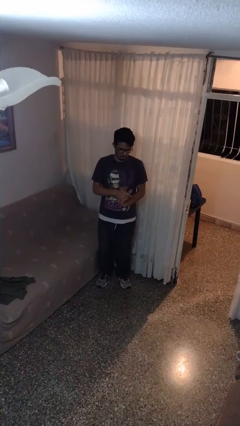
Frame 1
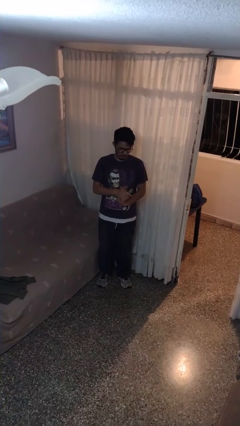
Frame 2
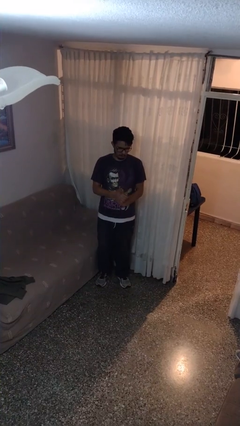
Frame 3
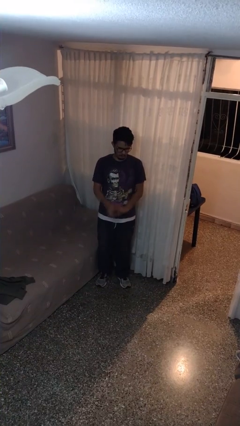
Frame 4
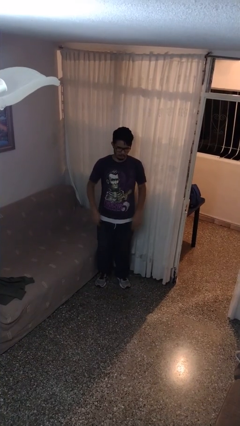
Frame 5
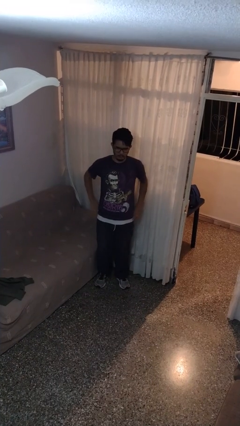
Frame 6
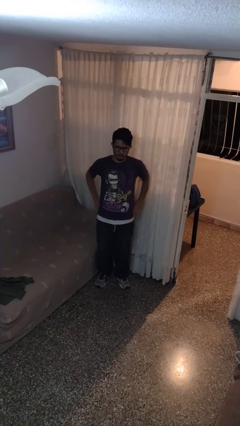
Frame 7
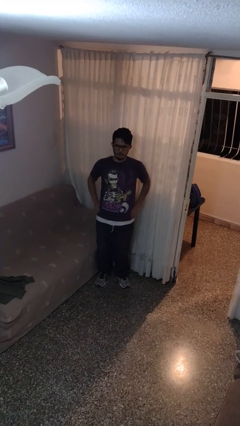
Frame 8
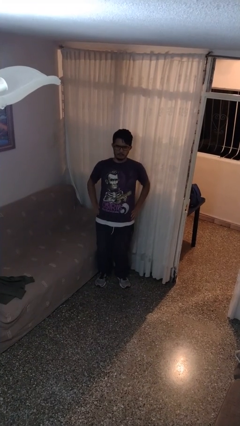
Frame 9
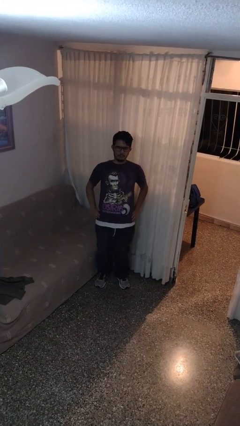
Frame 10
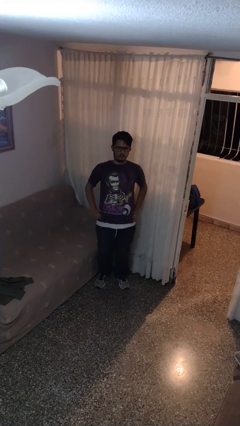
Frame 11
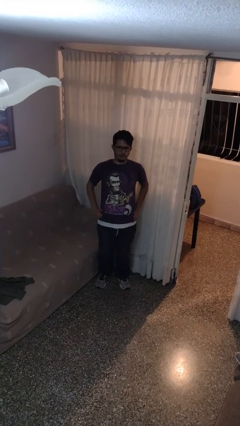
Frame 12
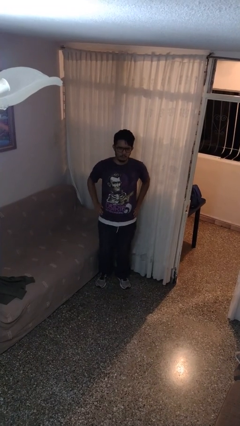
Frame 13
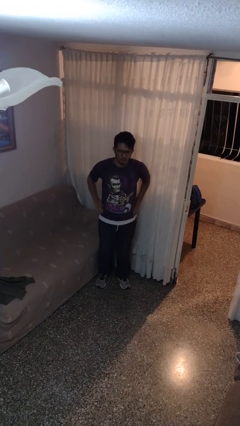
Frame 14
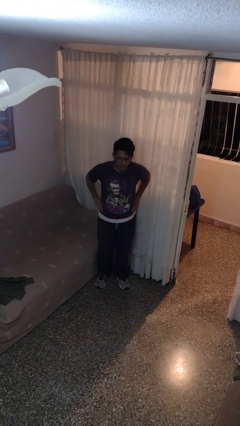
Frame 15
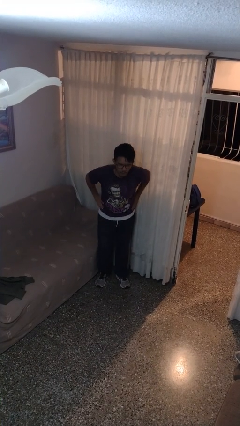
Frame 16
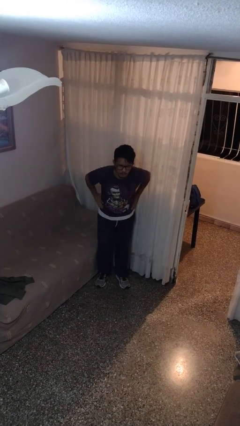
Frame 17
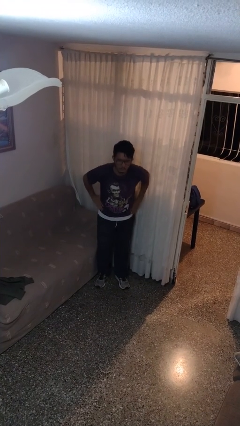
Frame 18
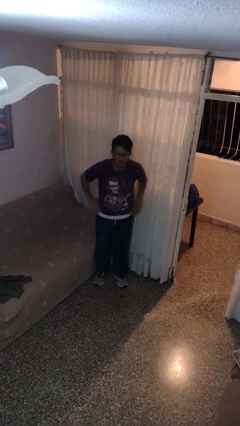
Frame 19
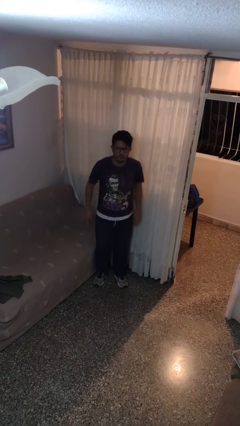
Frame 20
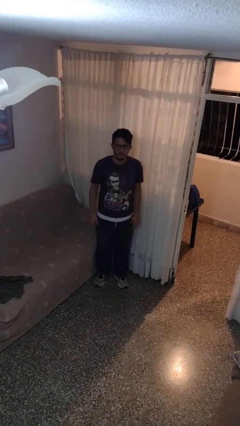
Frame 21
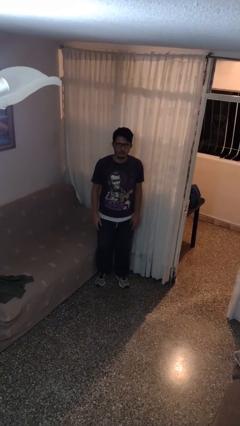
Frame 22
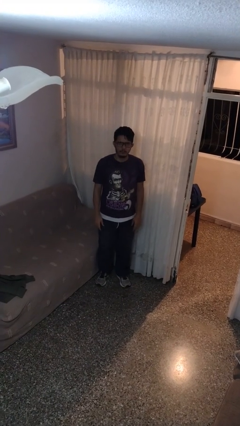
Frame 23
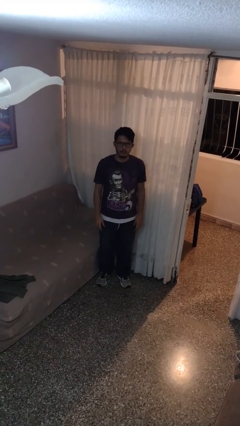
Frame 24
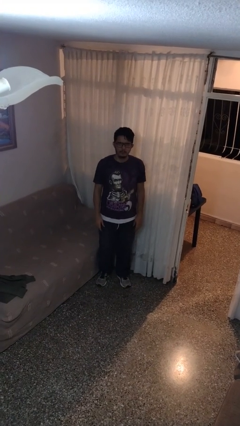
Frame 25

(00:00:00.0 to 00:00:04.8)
person wiggles hips

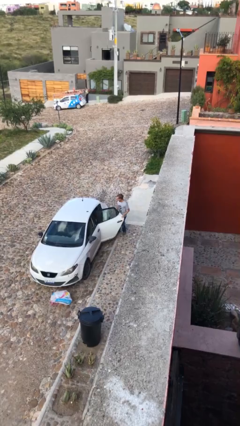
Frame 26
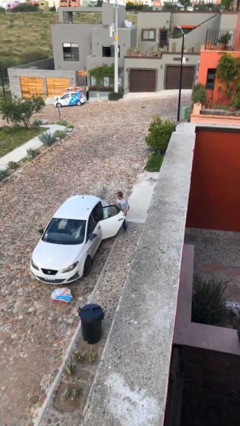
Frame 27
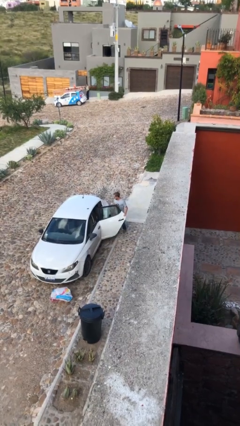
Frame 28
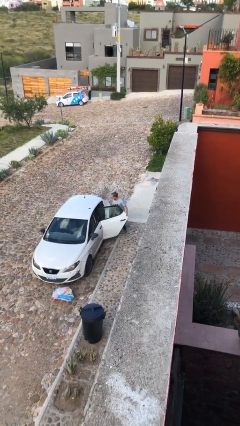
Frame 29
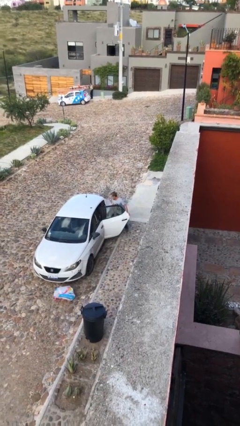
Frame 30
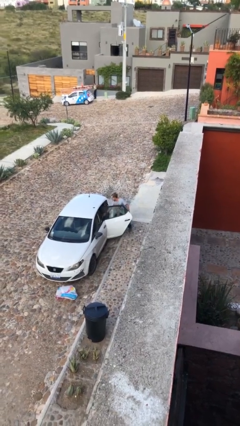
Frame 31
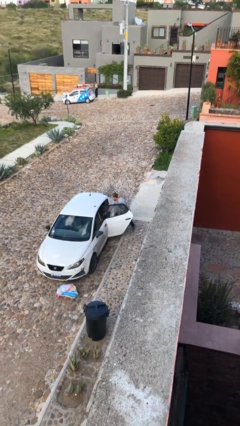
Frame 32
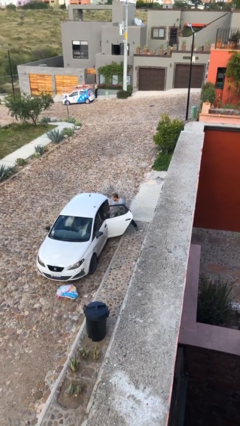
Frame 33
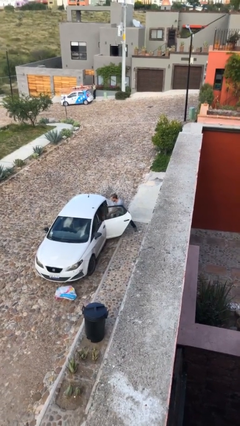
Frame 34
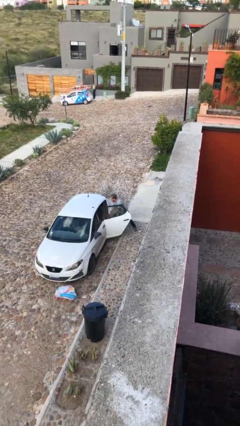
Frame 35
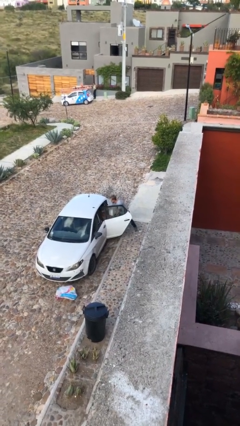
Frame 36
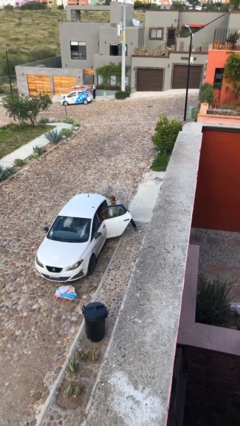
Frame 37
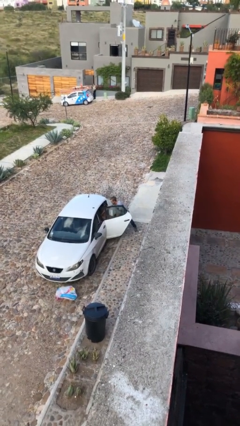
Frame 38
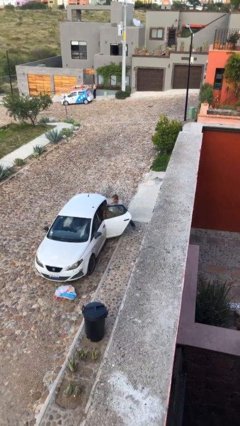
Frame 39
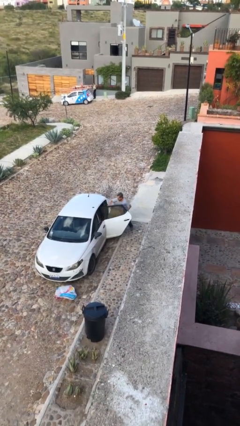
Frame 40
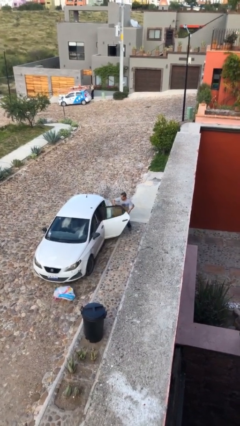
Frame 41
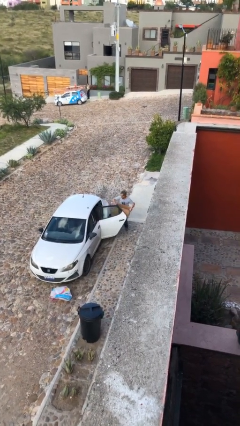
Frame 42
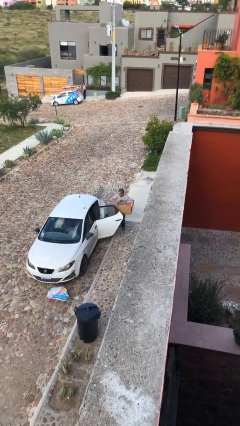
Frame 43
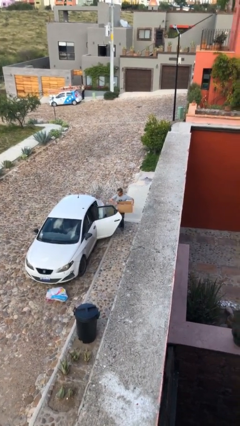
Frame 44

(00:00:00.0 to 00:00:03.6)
person unloads car

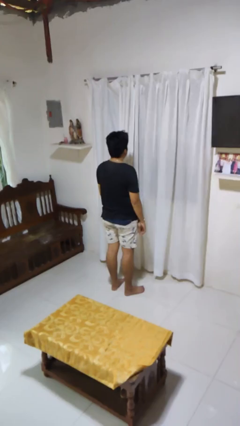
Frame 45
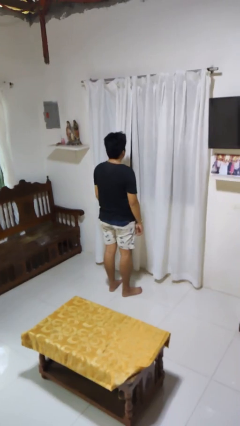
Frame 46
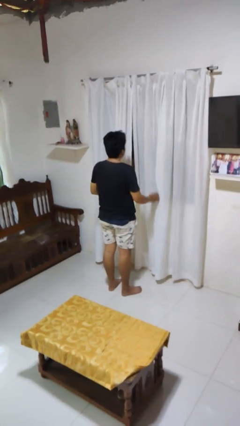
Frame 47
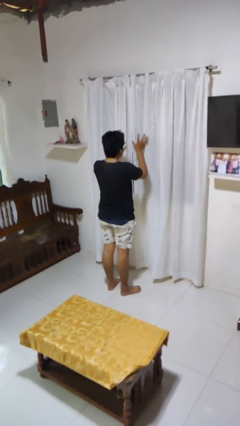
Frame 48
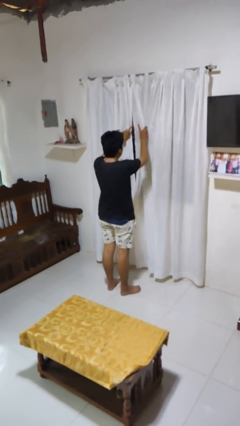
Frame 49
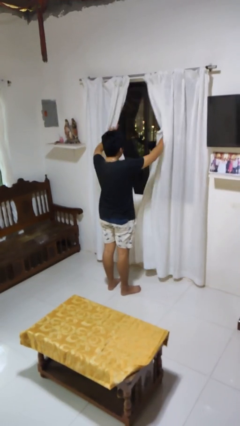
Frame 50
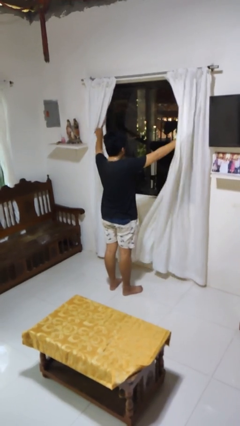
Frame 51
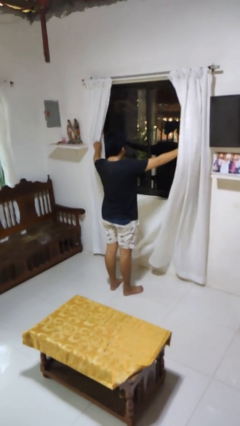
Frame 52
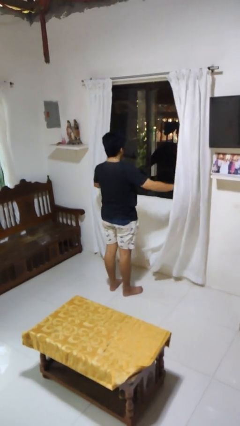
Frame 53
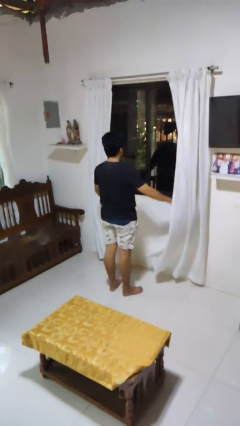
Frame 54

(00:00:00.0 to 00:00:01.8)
person opens curtains

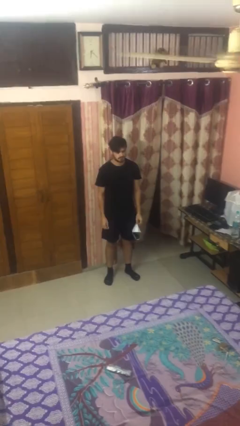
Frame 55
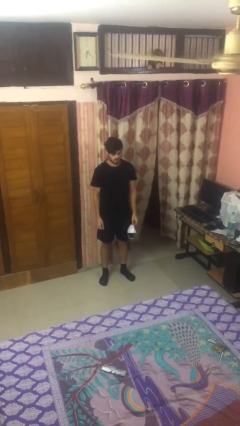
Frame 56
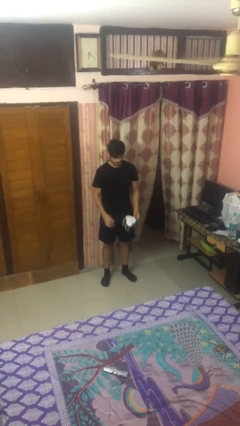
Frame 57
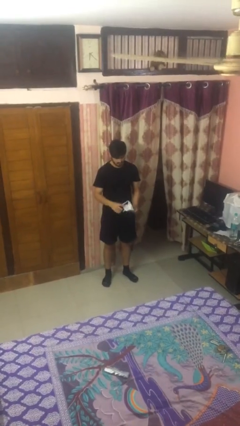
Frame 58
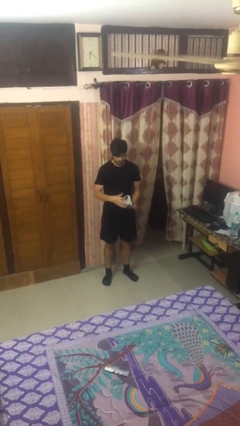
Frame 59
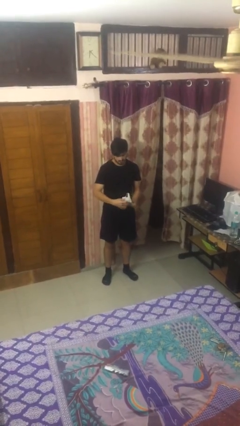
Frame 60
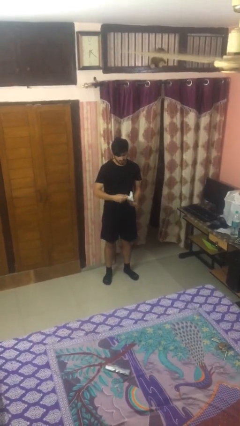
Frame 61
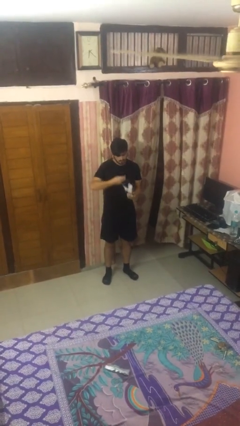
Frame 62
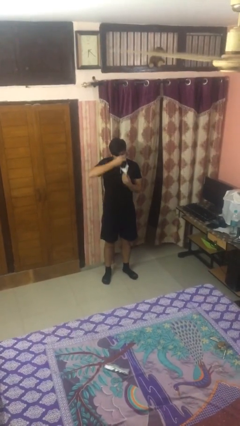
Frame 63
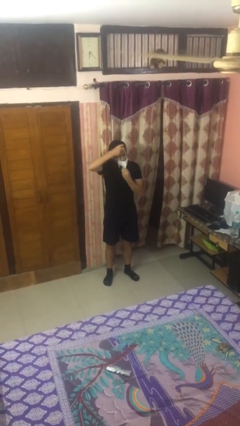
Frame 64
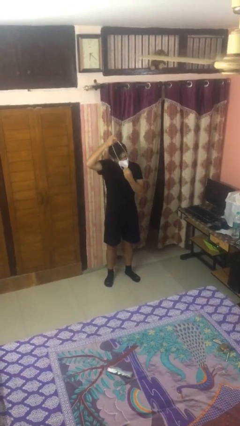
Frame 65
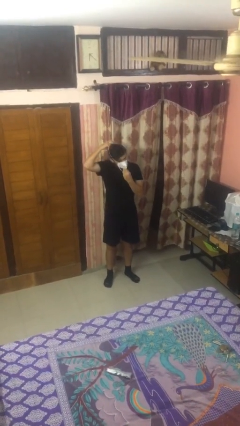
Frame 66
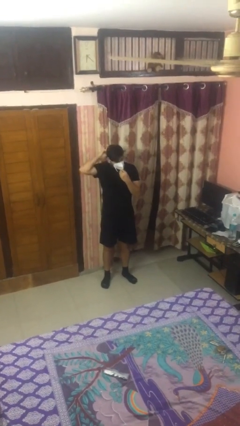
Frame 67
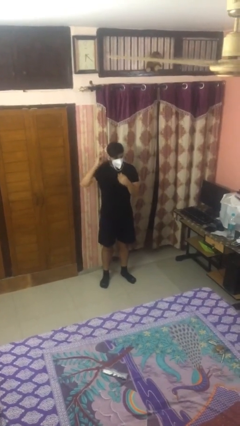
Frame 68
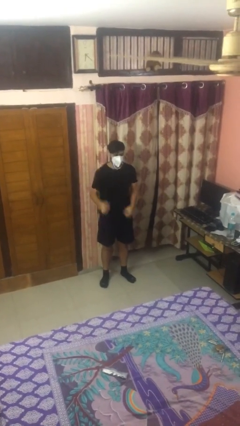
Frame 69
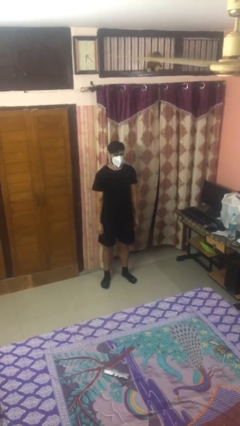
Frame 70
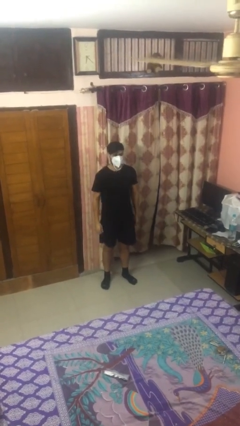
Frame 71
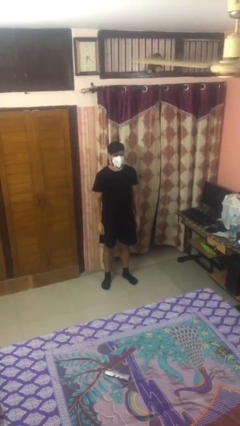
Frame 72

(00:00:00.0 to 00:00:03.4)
person puts on facemask

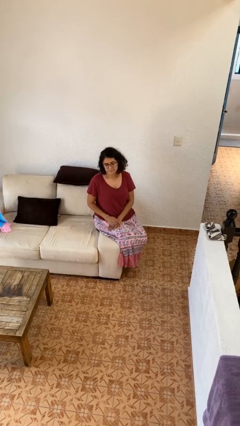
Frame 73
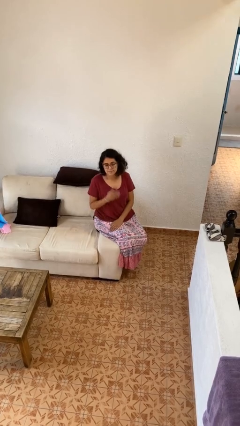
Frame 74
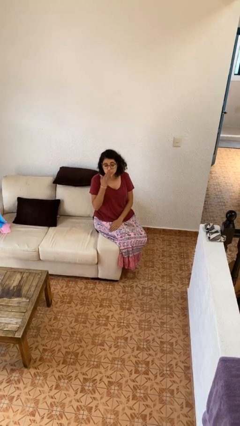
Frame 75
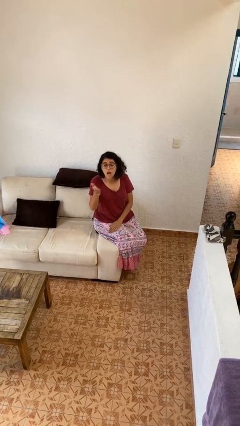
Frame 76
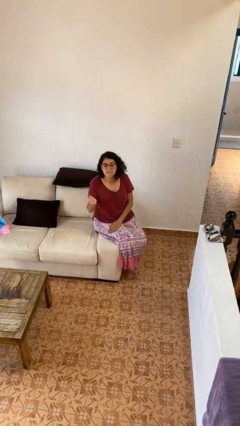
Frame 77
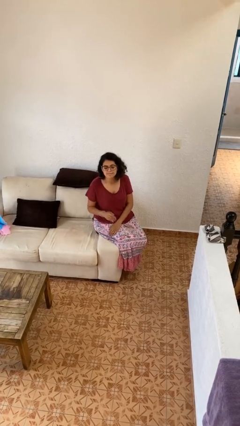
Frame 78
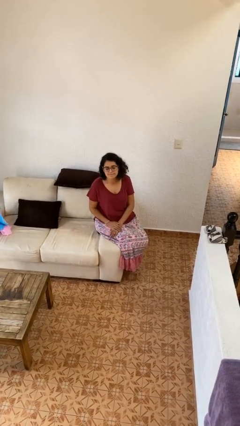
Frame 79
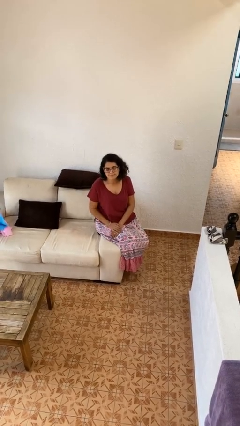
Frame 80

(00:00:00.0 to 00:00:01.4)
person gestures blow kiss

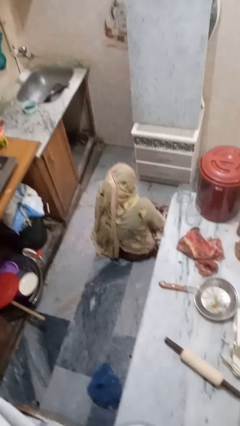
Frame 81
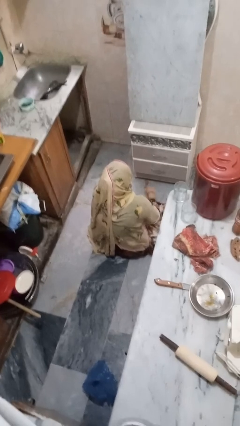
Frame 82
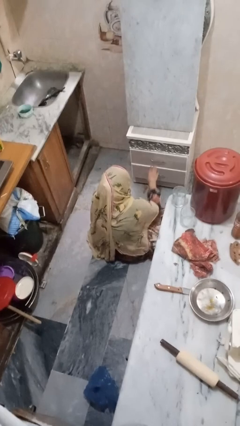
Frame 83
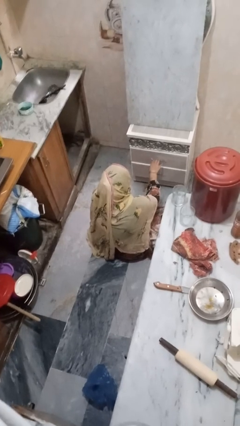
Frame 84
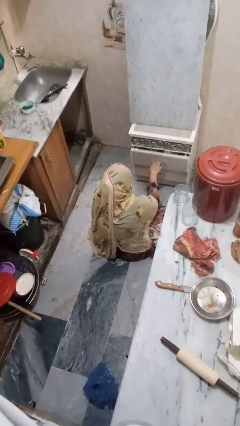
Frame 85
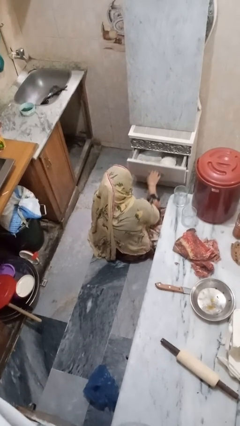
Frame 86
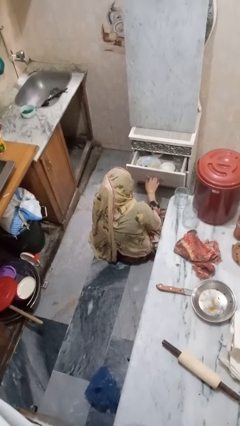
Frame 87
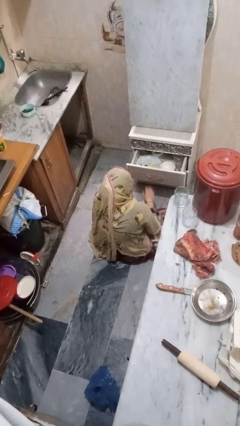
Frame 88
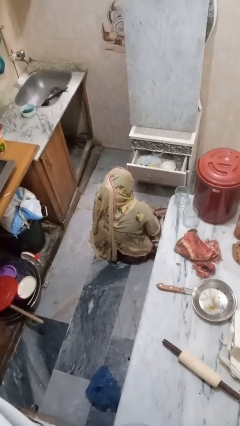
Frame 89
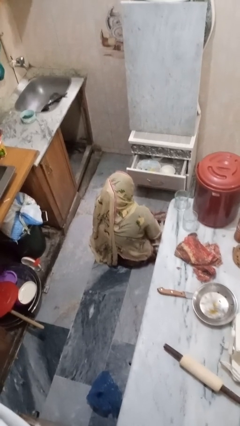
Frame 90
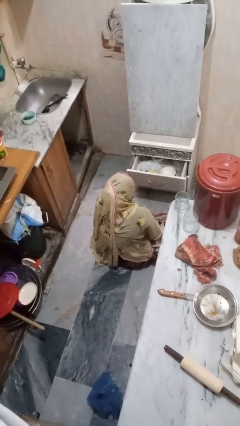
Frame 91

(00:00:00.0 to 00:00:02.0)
person opens kitchen drawer

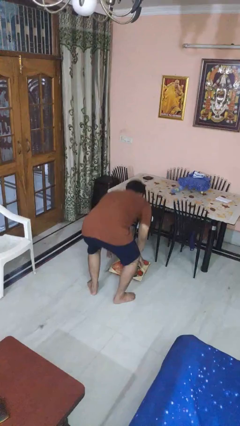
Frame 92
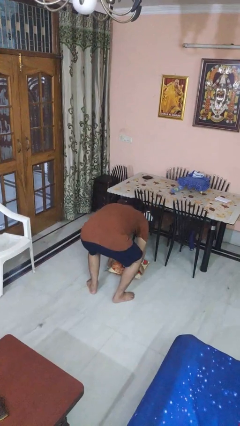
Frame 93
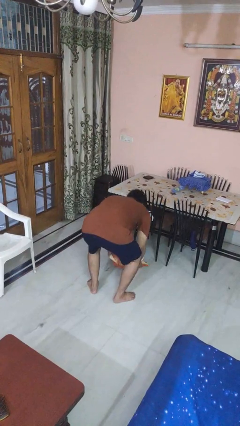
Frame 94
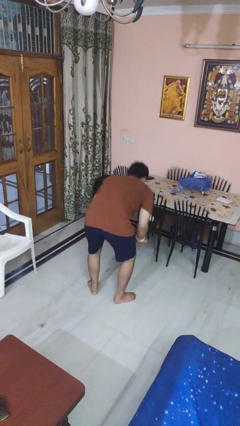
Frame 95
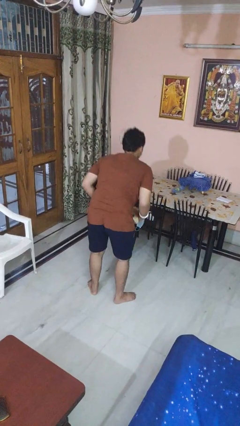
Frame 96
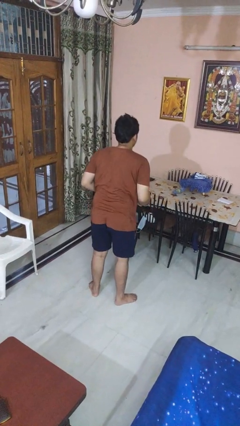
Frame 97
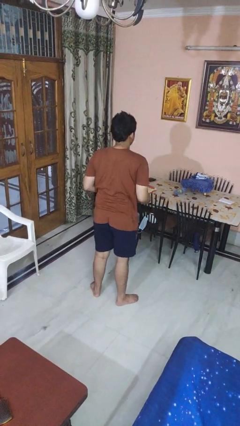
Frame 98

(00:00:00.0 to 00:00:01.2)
person picks up object from floor
